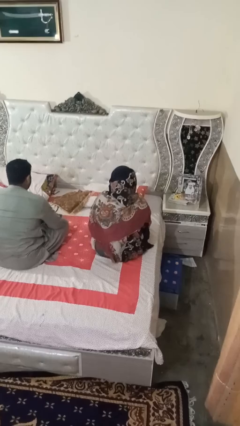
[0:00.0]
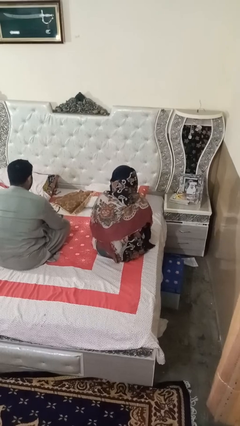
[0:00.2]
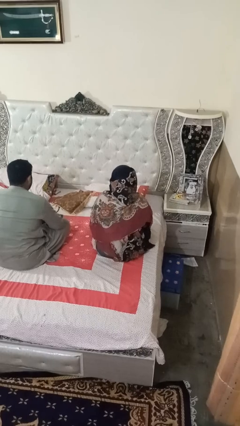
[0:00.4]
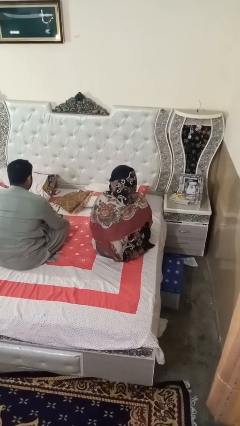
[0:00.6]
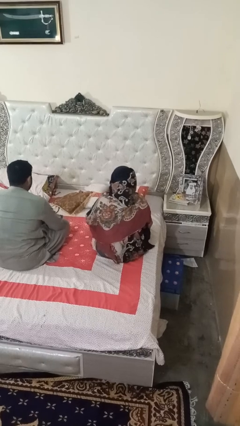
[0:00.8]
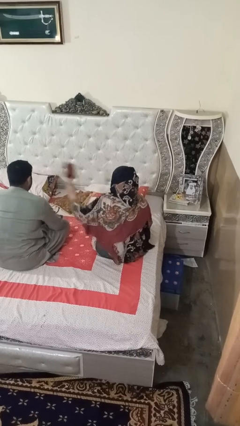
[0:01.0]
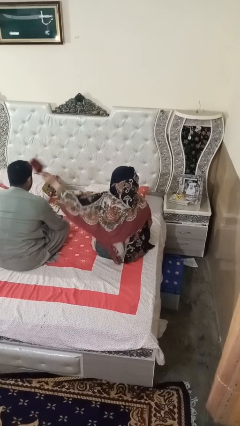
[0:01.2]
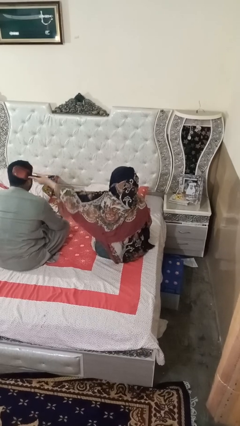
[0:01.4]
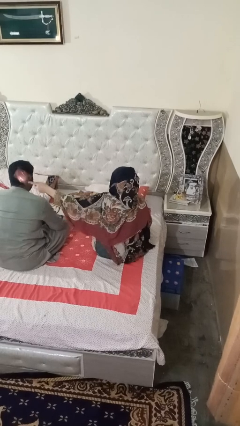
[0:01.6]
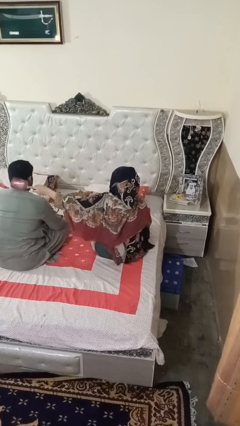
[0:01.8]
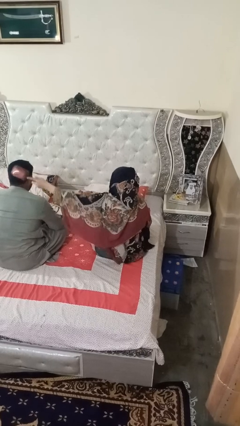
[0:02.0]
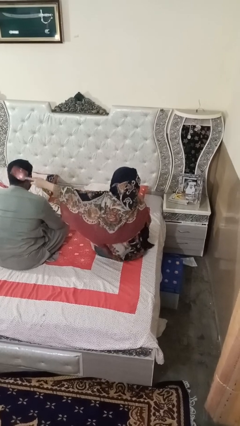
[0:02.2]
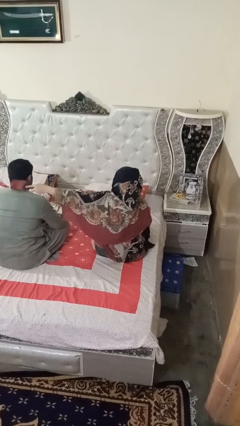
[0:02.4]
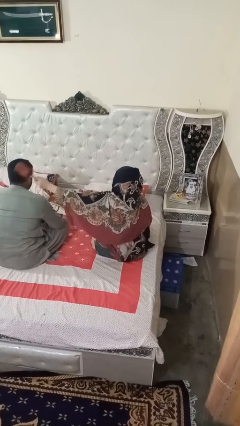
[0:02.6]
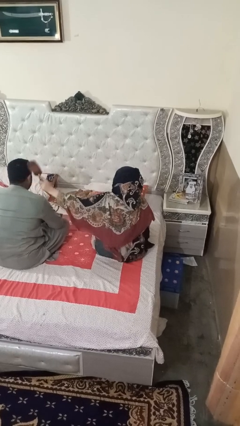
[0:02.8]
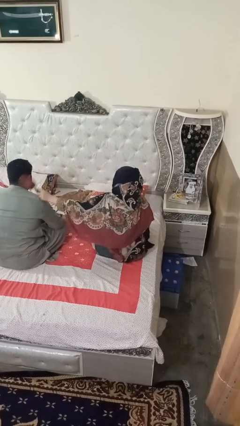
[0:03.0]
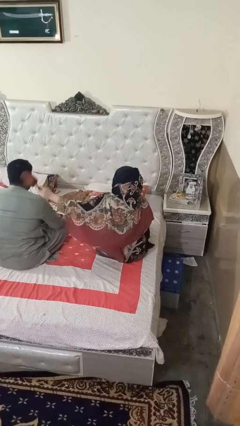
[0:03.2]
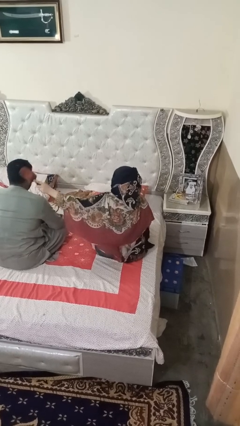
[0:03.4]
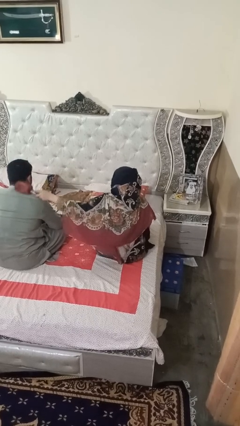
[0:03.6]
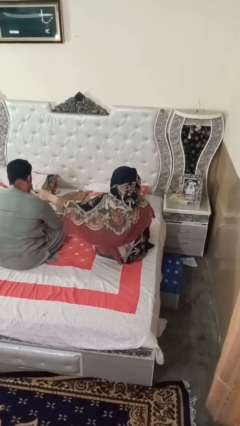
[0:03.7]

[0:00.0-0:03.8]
person brushes hair of person

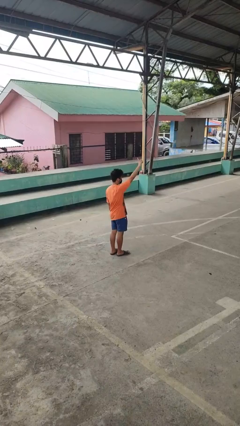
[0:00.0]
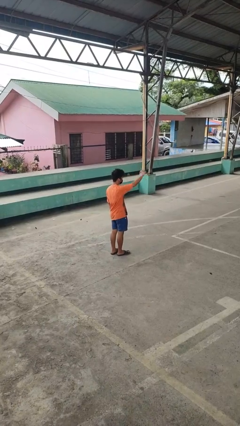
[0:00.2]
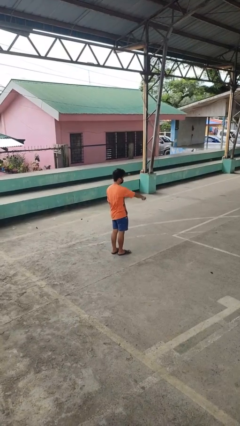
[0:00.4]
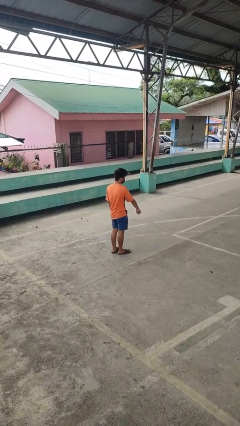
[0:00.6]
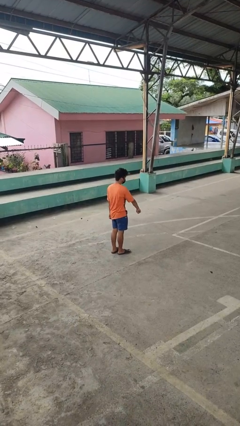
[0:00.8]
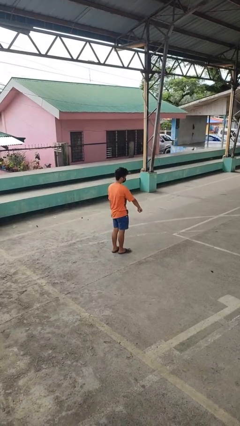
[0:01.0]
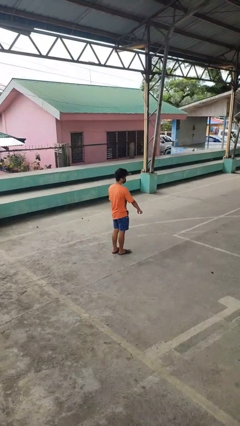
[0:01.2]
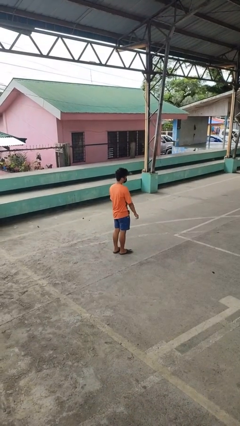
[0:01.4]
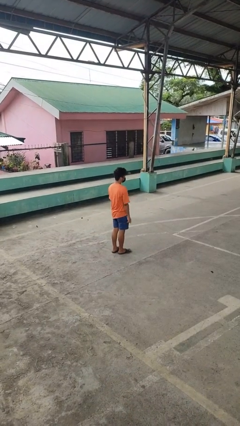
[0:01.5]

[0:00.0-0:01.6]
person gestures swipe down

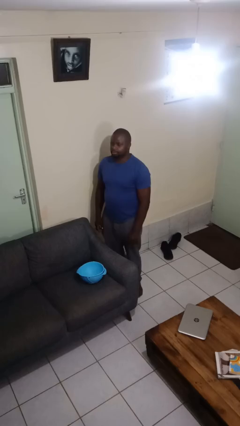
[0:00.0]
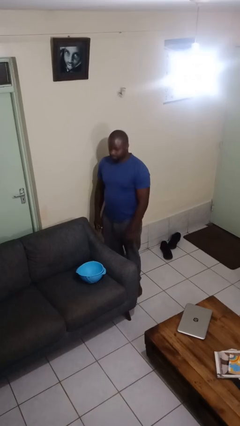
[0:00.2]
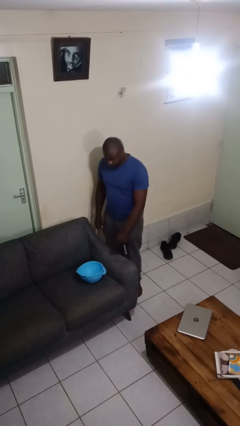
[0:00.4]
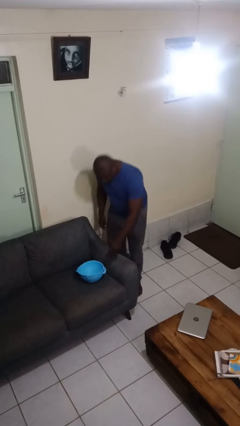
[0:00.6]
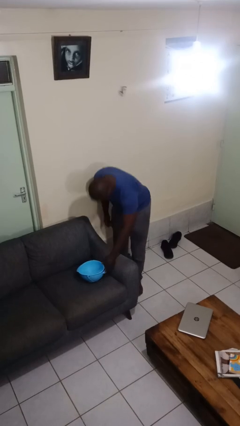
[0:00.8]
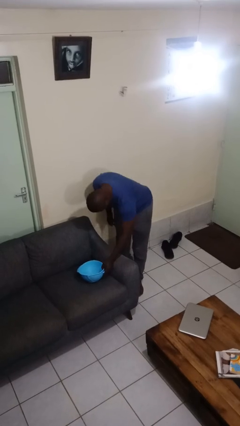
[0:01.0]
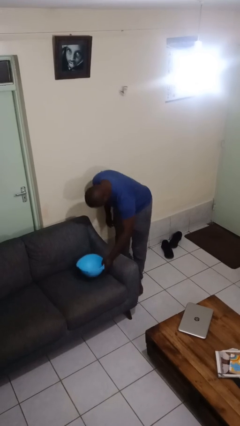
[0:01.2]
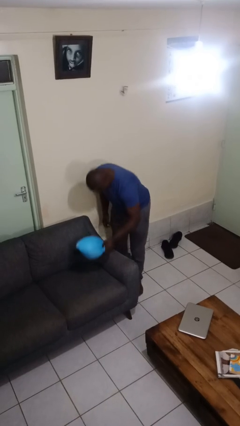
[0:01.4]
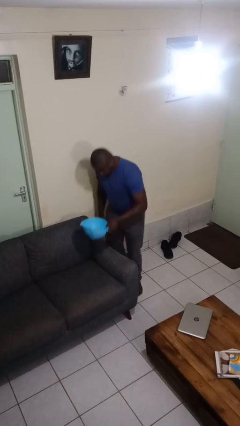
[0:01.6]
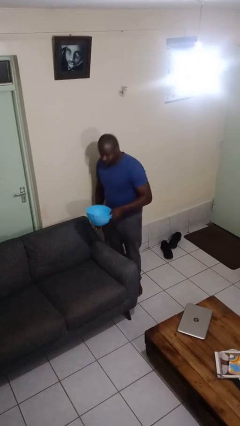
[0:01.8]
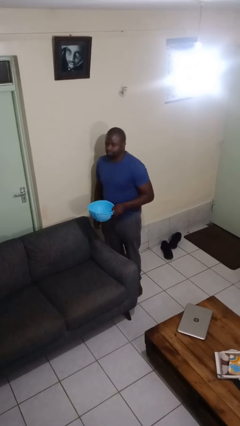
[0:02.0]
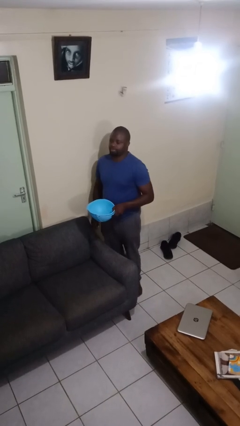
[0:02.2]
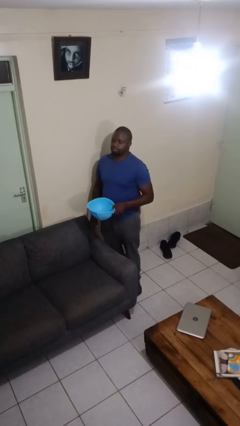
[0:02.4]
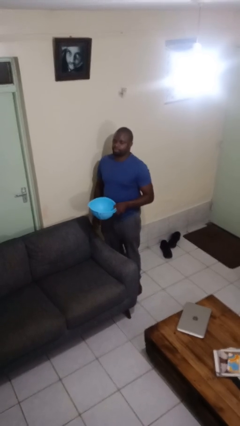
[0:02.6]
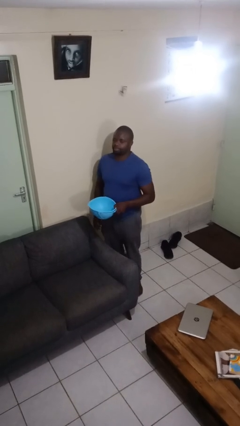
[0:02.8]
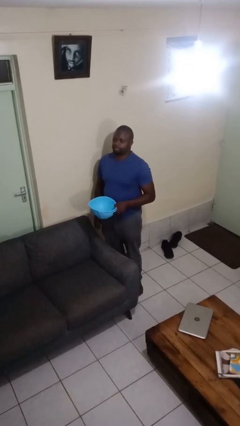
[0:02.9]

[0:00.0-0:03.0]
person picks up object from couch

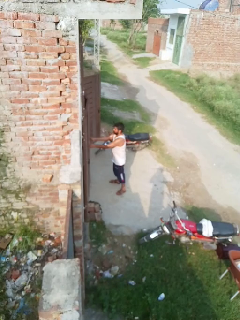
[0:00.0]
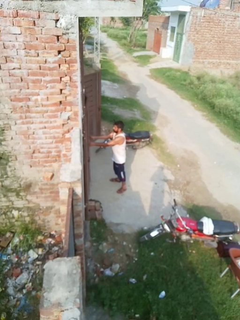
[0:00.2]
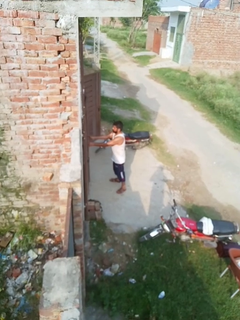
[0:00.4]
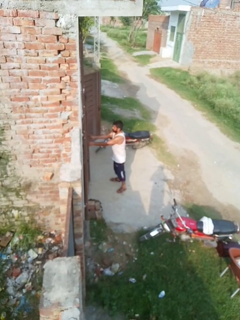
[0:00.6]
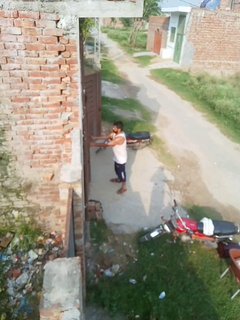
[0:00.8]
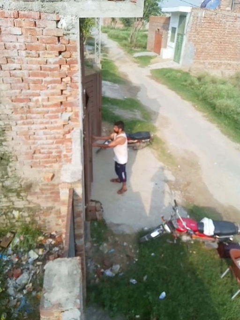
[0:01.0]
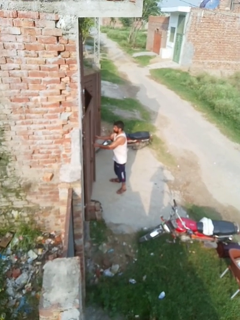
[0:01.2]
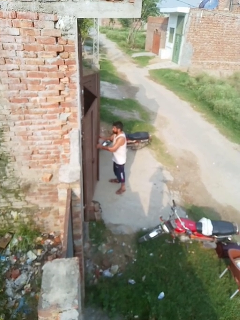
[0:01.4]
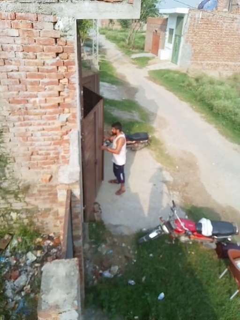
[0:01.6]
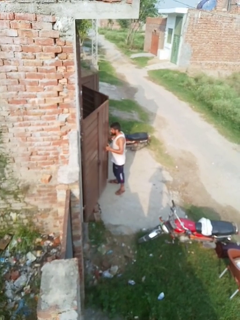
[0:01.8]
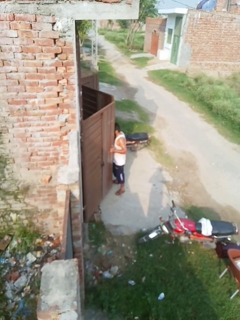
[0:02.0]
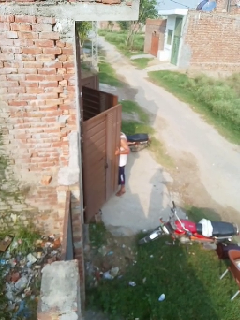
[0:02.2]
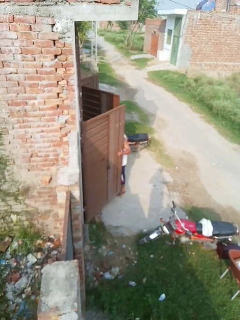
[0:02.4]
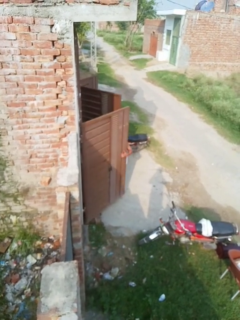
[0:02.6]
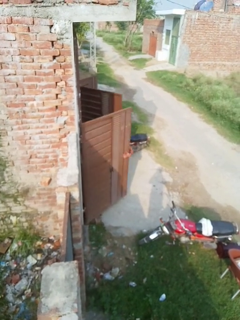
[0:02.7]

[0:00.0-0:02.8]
person opens gate

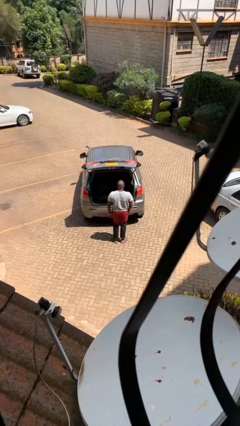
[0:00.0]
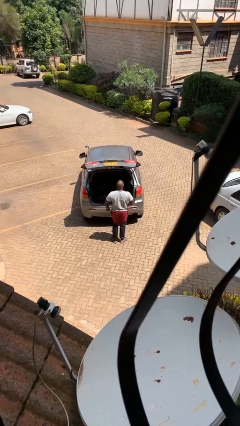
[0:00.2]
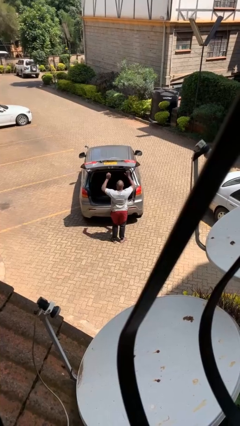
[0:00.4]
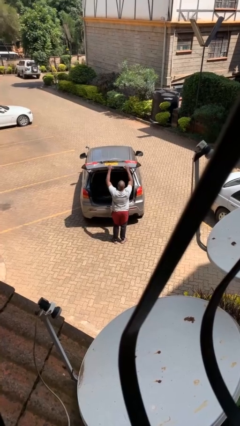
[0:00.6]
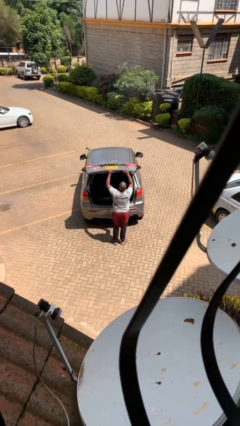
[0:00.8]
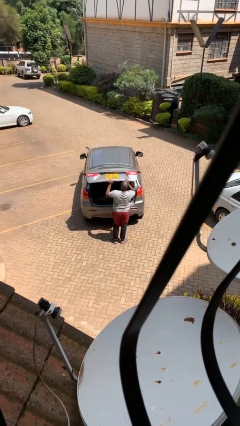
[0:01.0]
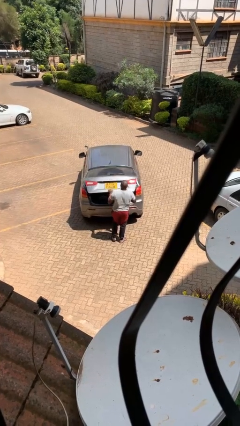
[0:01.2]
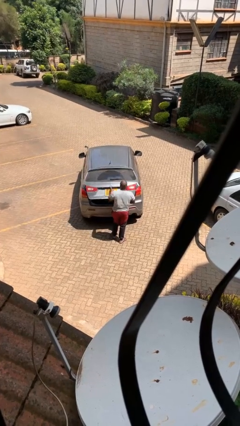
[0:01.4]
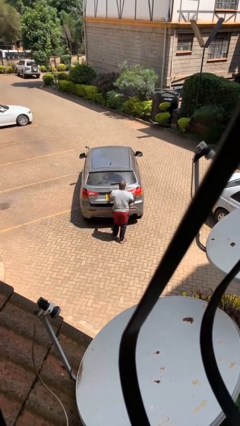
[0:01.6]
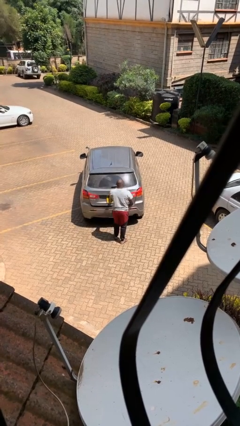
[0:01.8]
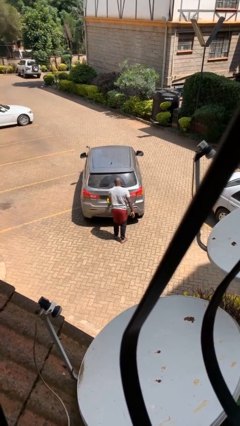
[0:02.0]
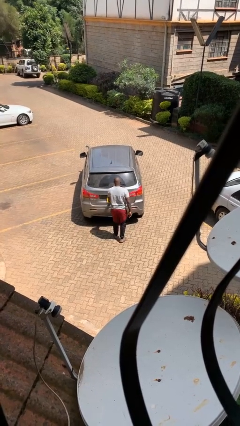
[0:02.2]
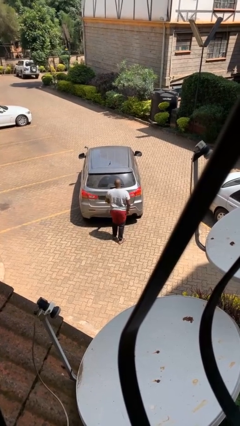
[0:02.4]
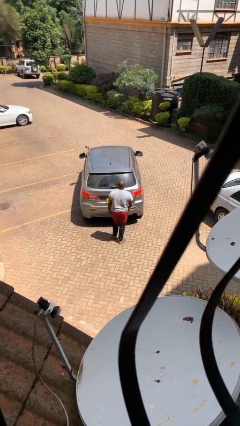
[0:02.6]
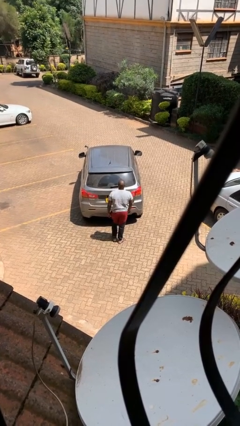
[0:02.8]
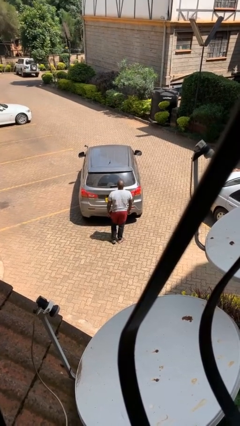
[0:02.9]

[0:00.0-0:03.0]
person closes car trunk

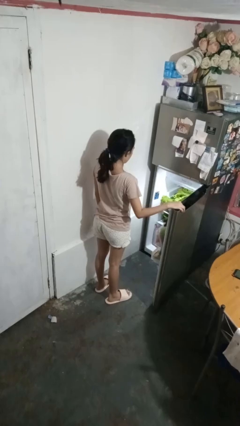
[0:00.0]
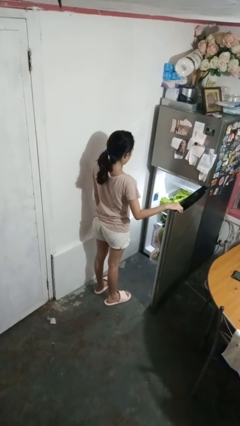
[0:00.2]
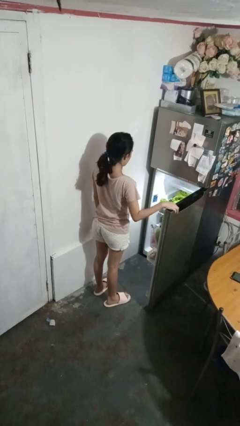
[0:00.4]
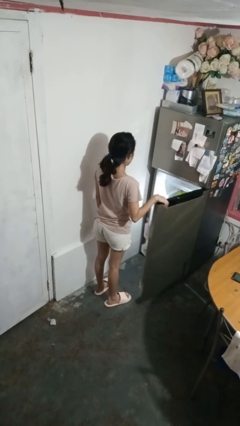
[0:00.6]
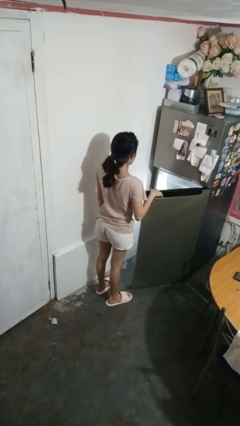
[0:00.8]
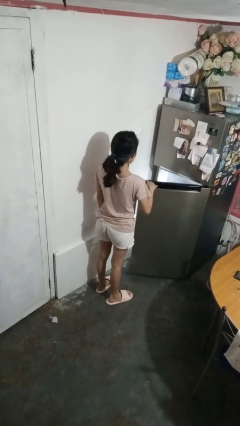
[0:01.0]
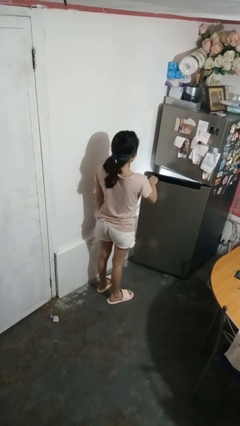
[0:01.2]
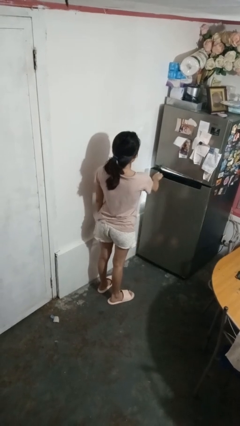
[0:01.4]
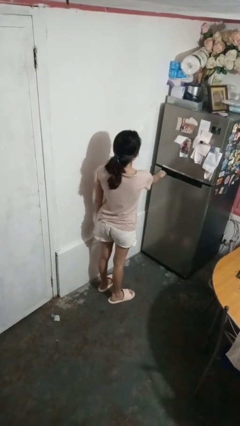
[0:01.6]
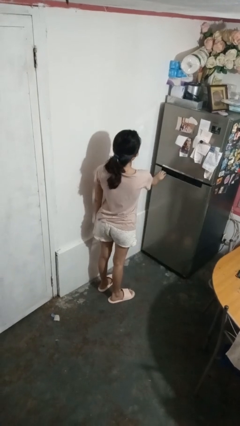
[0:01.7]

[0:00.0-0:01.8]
person closes refrigerator

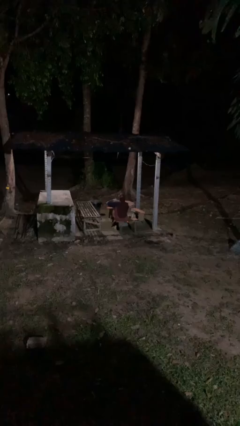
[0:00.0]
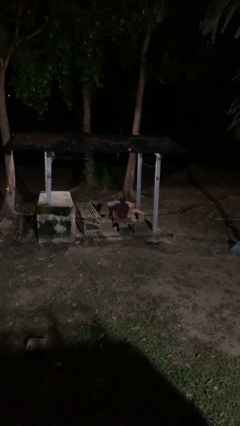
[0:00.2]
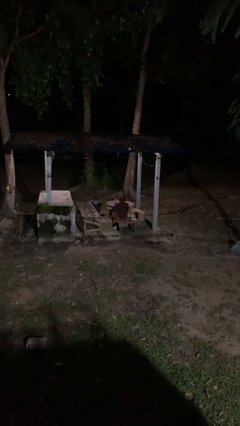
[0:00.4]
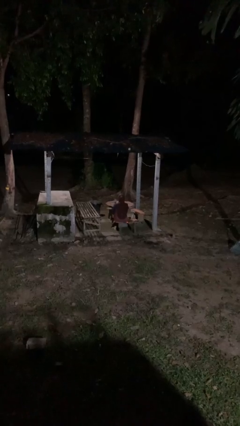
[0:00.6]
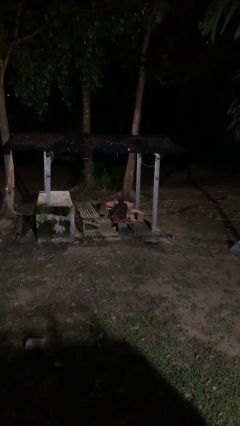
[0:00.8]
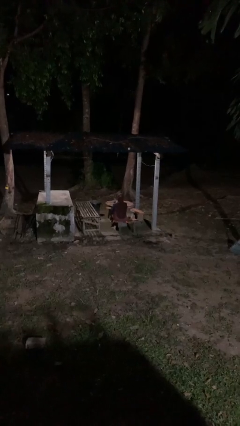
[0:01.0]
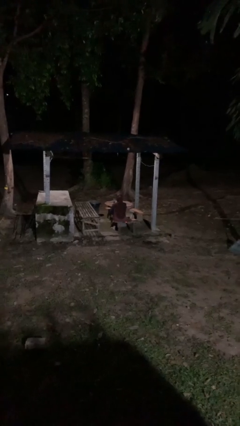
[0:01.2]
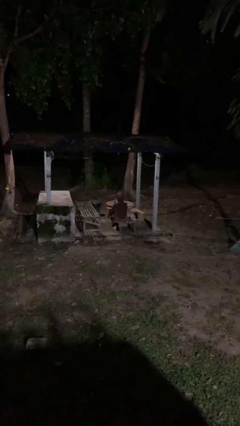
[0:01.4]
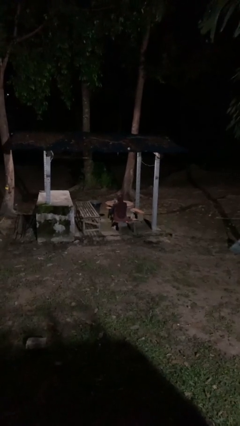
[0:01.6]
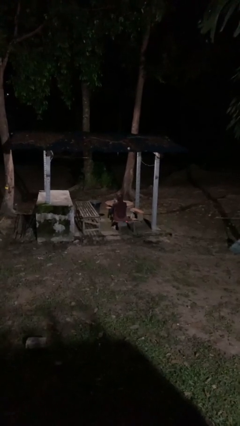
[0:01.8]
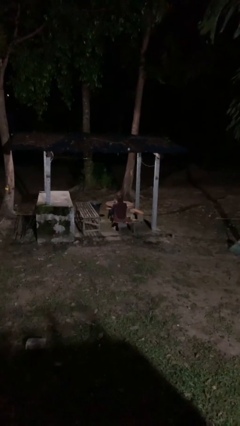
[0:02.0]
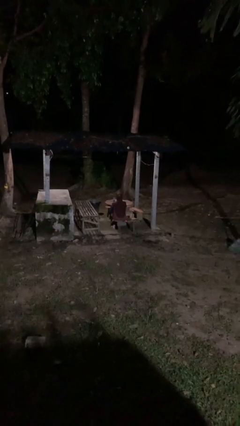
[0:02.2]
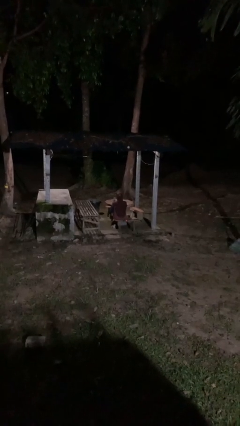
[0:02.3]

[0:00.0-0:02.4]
person gestures cut
